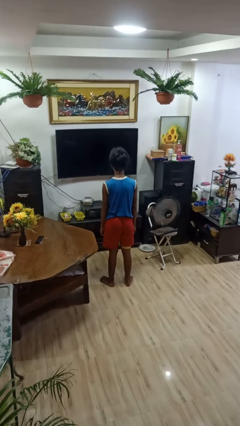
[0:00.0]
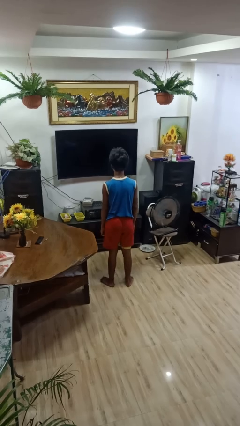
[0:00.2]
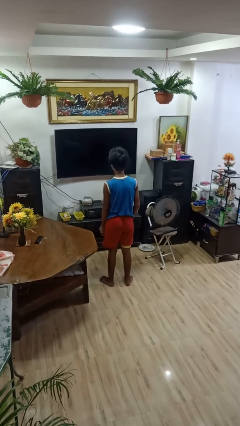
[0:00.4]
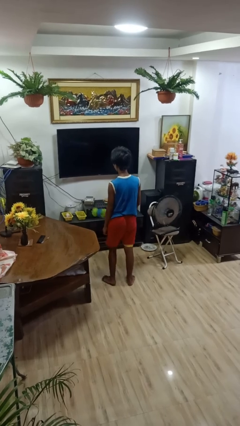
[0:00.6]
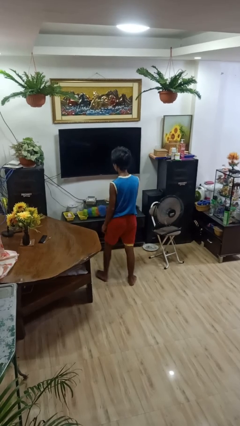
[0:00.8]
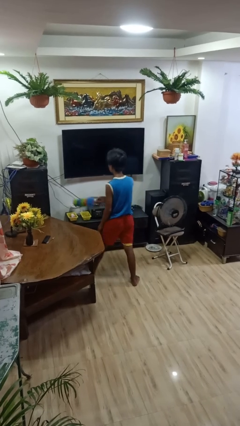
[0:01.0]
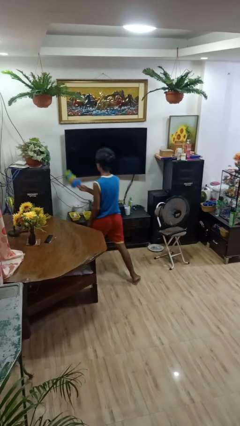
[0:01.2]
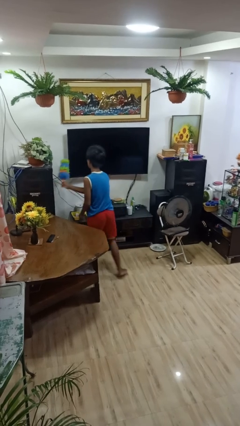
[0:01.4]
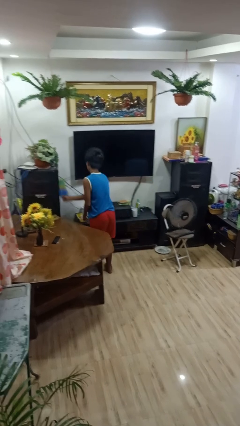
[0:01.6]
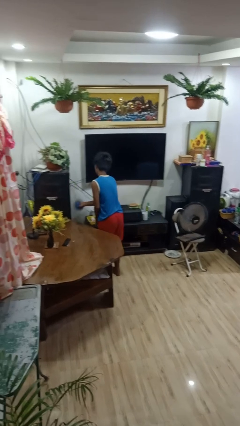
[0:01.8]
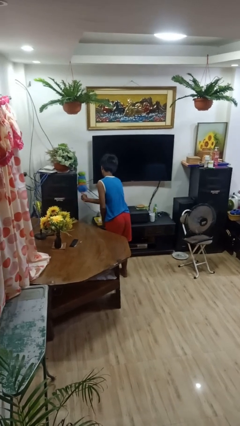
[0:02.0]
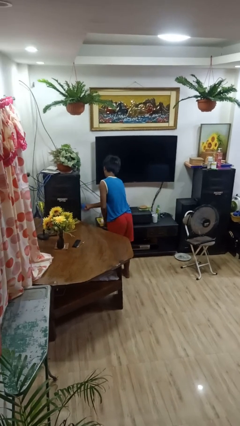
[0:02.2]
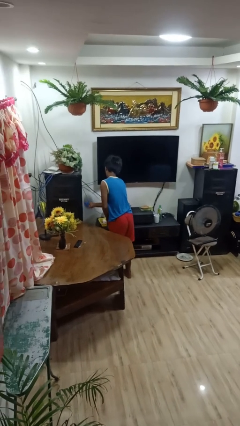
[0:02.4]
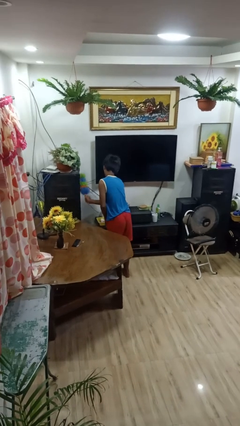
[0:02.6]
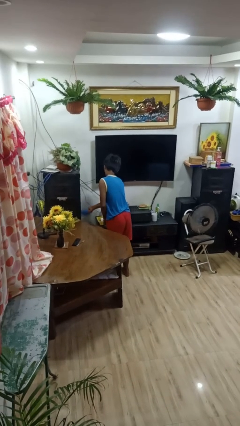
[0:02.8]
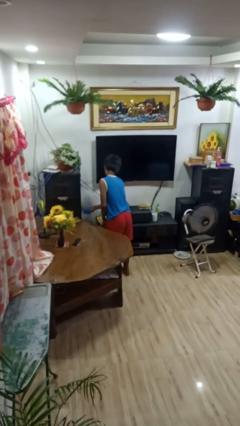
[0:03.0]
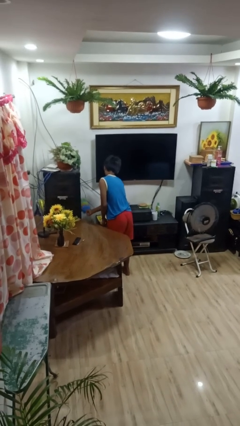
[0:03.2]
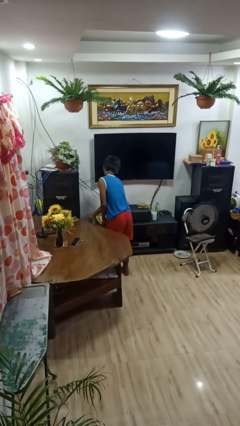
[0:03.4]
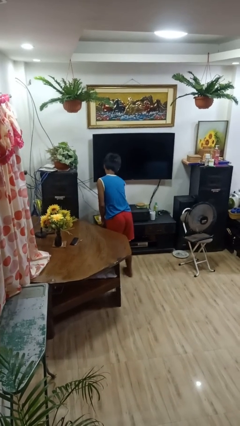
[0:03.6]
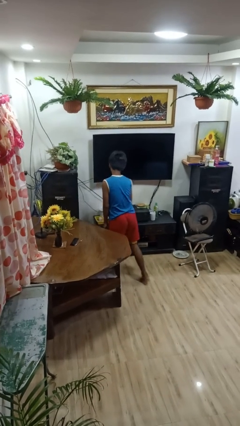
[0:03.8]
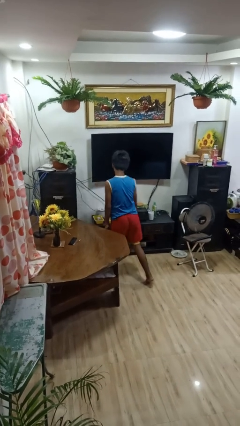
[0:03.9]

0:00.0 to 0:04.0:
person dusts furniture

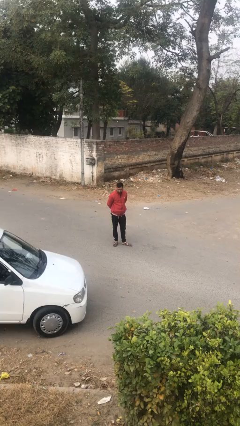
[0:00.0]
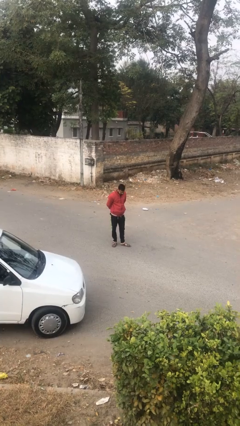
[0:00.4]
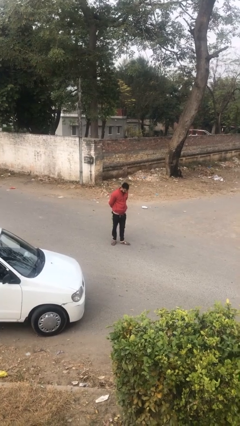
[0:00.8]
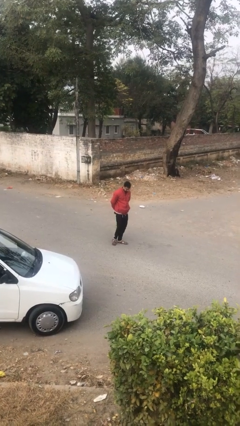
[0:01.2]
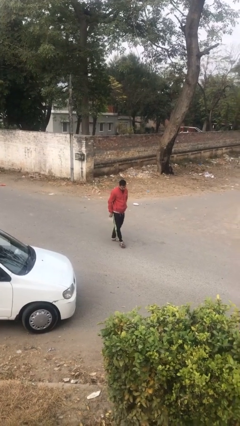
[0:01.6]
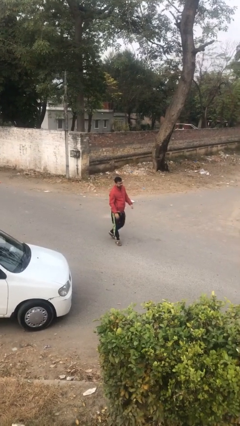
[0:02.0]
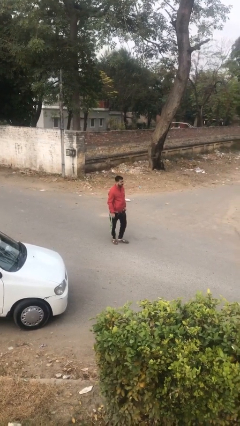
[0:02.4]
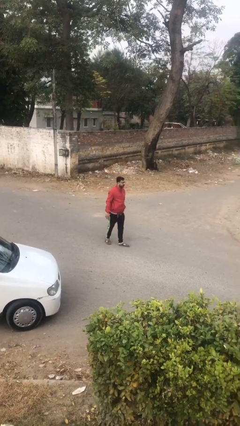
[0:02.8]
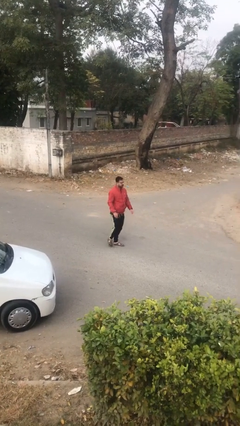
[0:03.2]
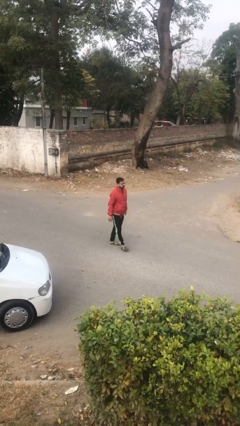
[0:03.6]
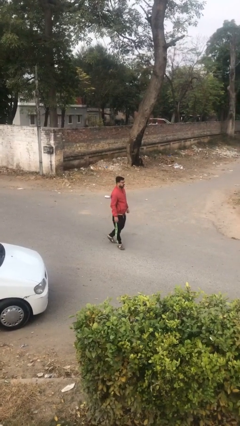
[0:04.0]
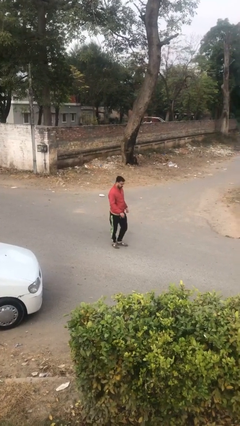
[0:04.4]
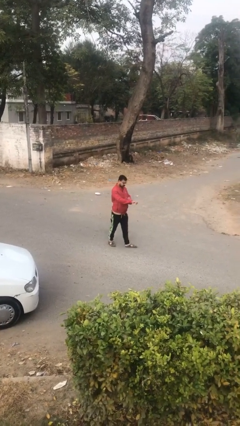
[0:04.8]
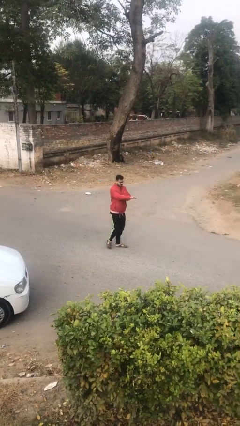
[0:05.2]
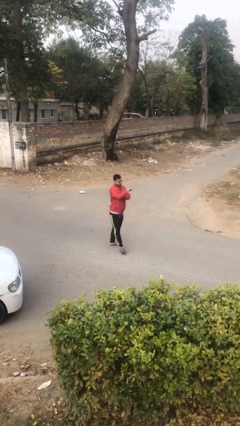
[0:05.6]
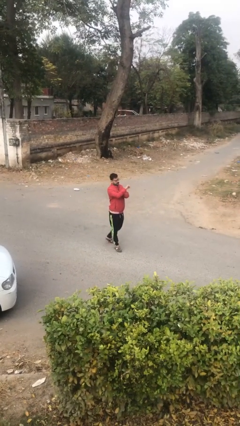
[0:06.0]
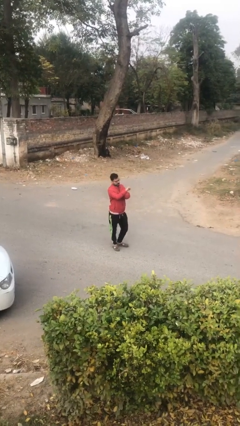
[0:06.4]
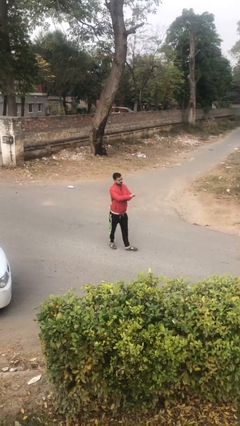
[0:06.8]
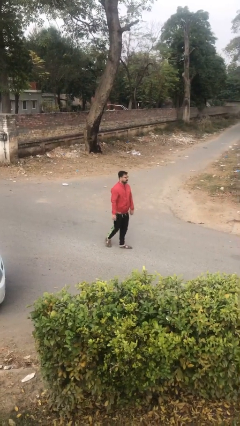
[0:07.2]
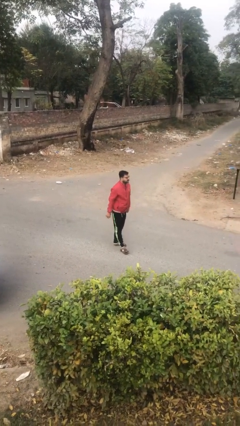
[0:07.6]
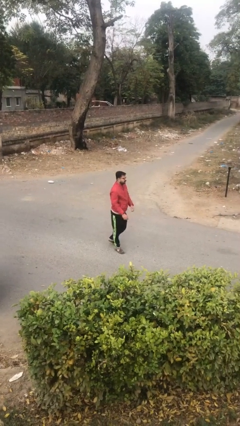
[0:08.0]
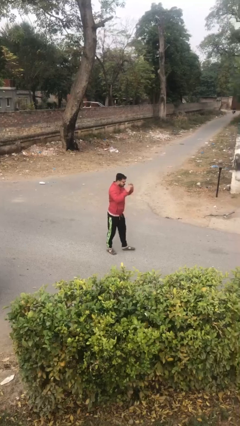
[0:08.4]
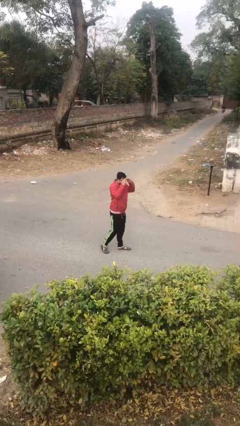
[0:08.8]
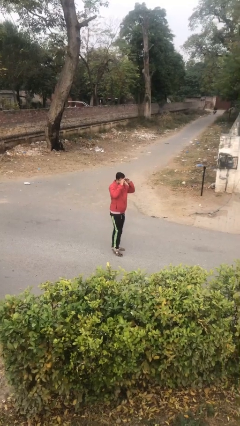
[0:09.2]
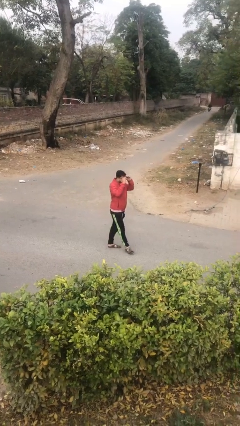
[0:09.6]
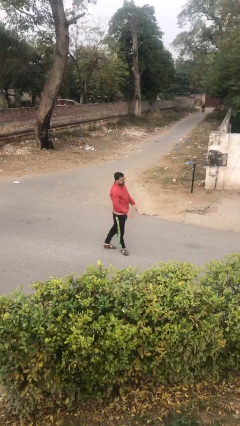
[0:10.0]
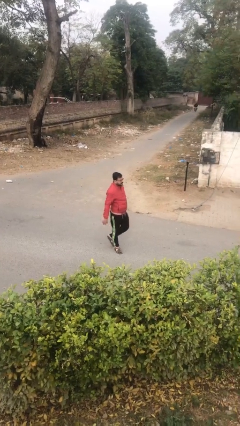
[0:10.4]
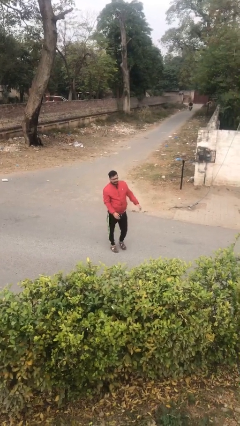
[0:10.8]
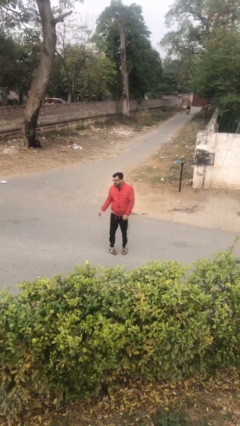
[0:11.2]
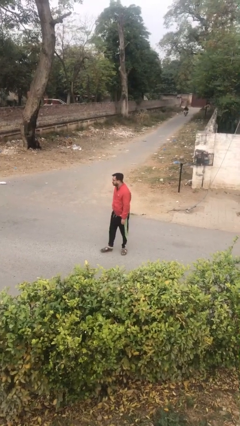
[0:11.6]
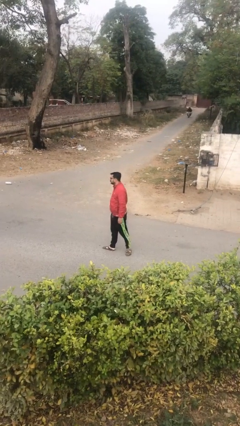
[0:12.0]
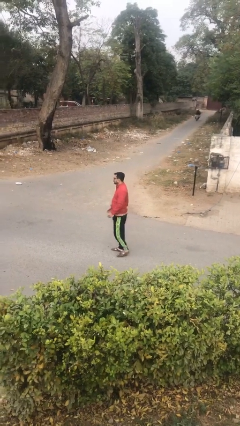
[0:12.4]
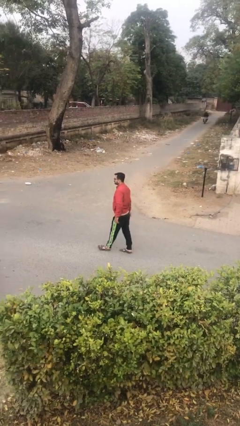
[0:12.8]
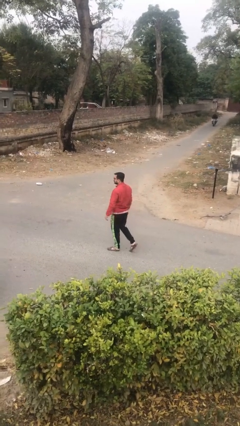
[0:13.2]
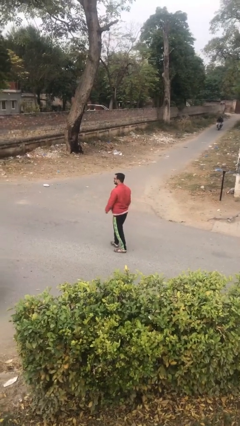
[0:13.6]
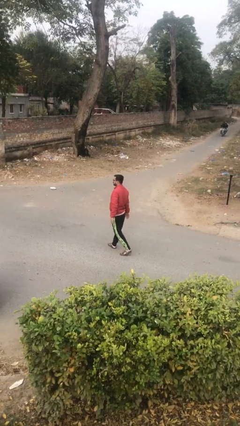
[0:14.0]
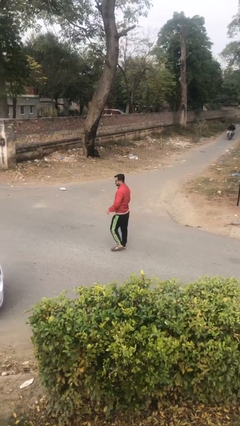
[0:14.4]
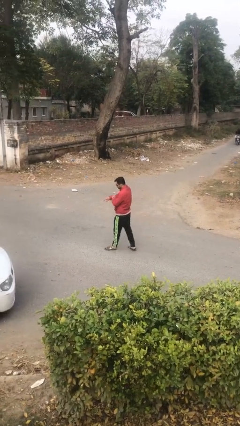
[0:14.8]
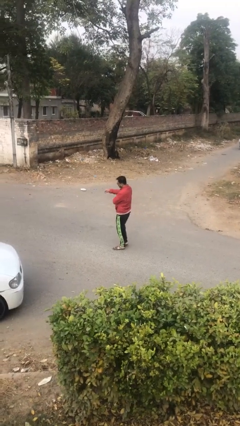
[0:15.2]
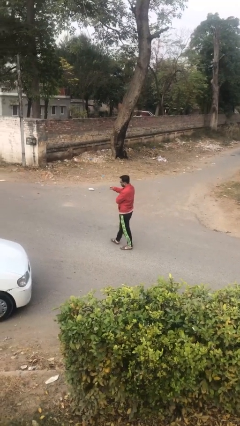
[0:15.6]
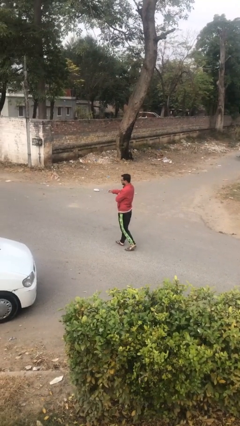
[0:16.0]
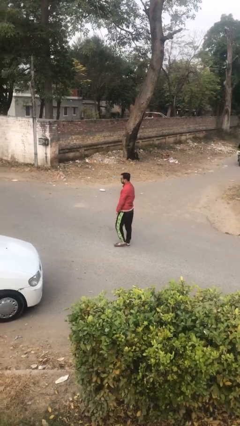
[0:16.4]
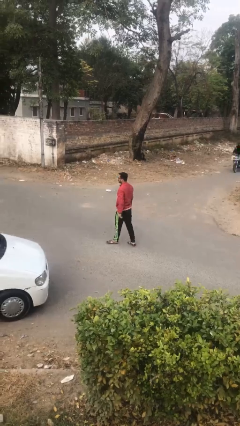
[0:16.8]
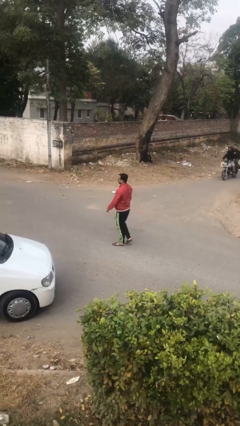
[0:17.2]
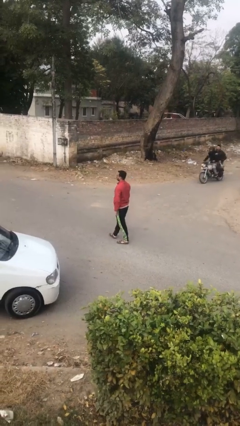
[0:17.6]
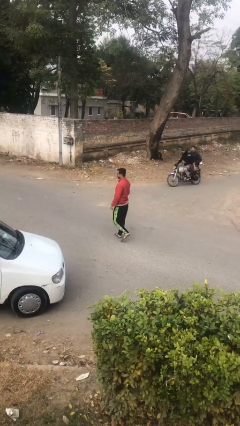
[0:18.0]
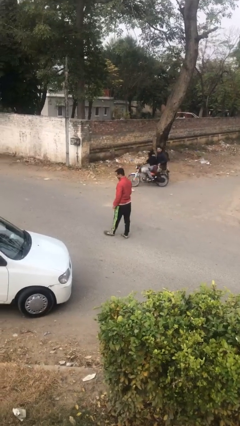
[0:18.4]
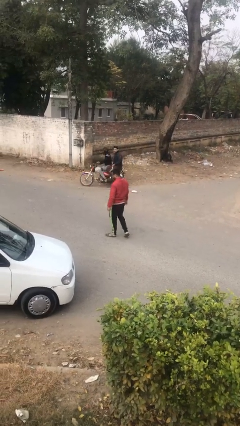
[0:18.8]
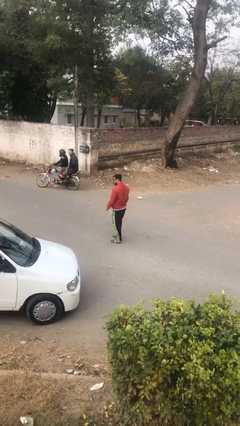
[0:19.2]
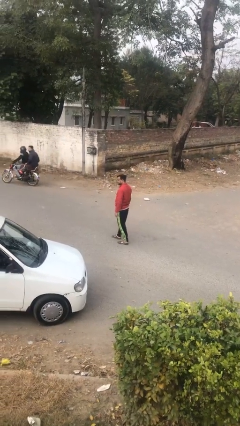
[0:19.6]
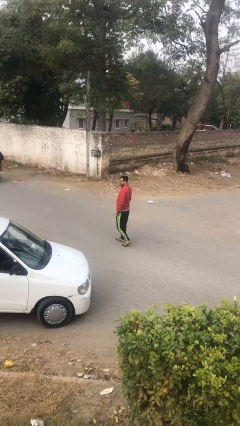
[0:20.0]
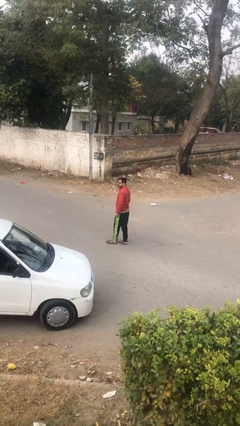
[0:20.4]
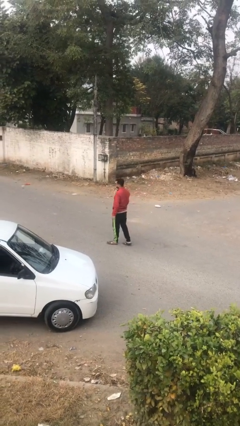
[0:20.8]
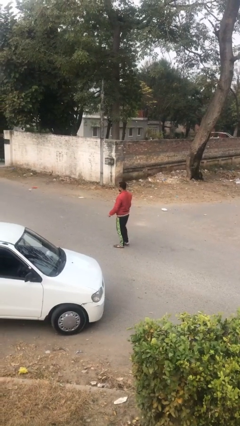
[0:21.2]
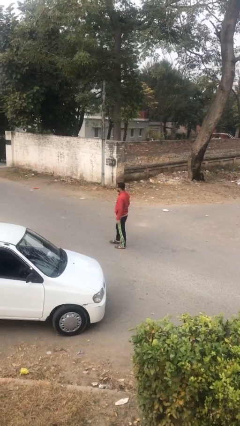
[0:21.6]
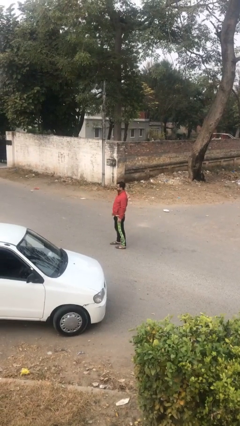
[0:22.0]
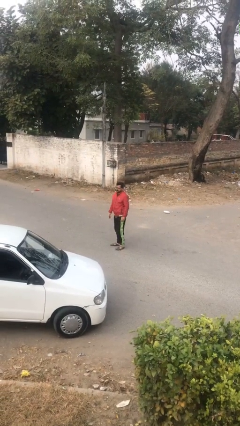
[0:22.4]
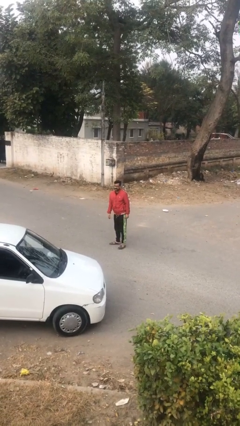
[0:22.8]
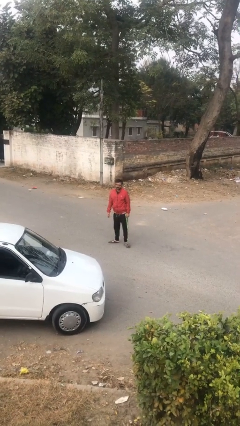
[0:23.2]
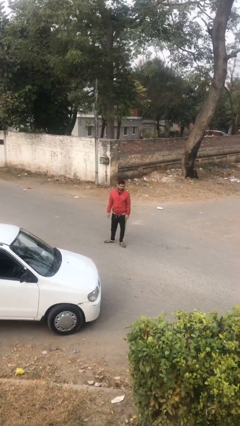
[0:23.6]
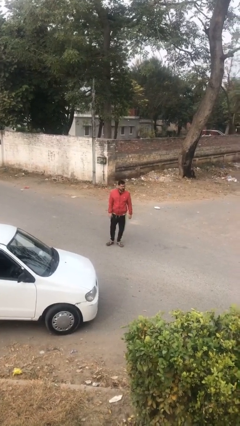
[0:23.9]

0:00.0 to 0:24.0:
person walks

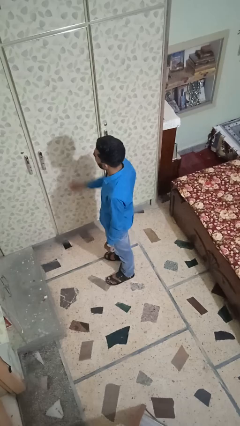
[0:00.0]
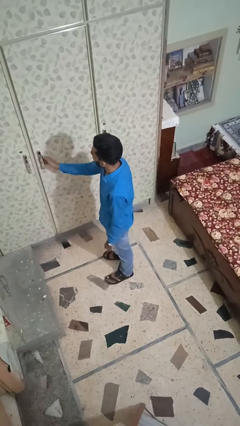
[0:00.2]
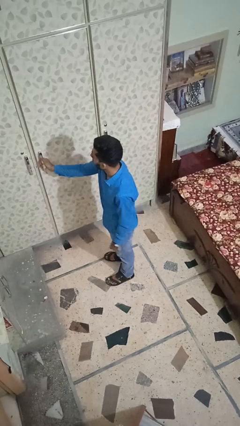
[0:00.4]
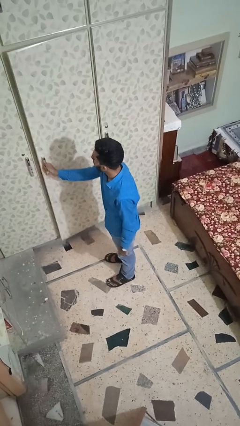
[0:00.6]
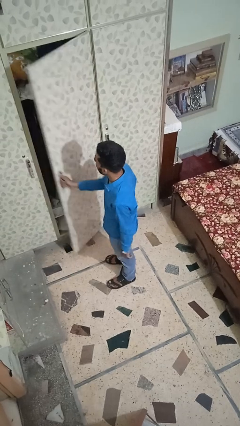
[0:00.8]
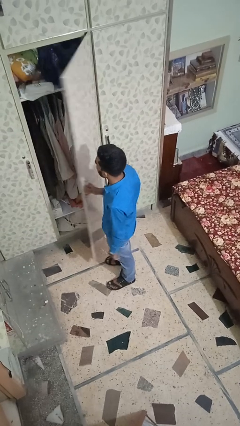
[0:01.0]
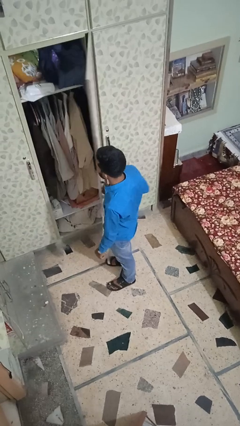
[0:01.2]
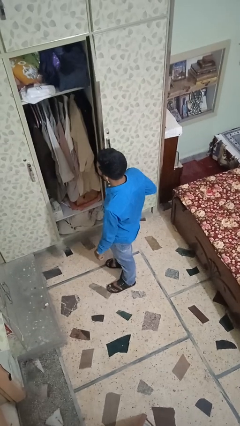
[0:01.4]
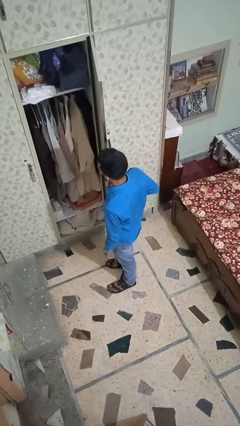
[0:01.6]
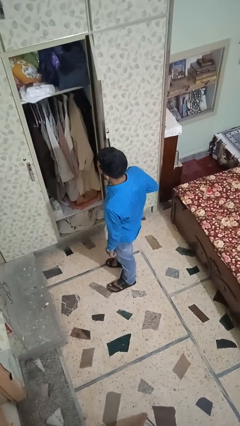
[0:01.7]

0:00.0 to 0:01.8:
person opens closet door
